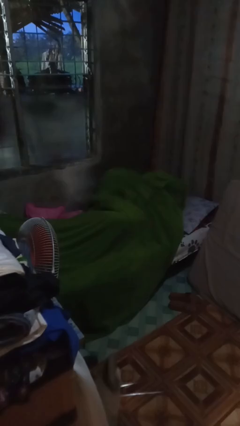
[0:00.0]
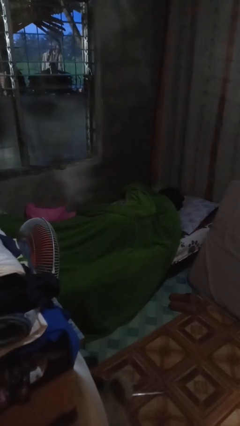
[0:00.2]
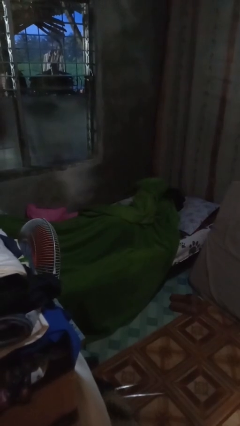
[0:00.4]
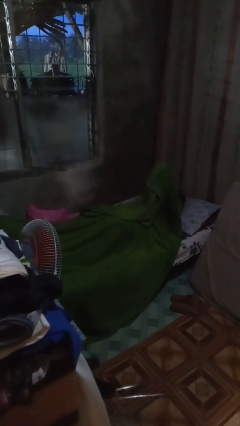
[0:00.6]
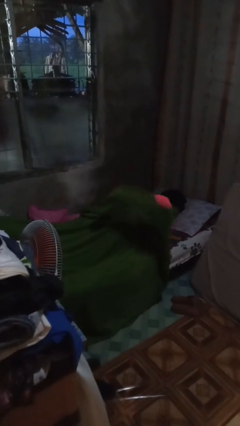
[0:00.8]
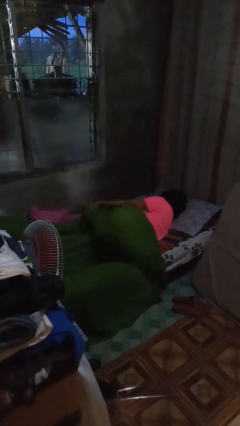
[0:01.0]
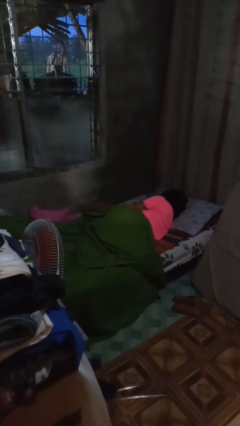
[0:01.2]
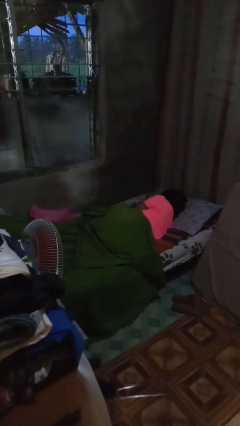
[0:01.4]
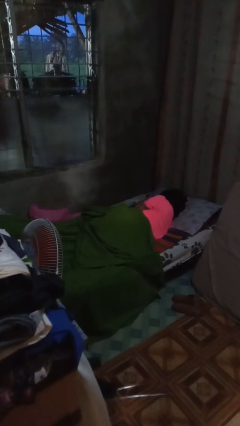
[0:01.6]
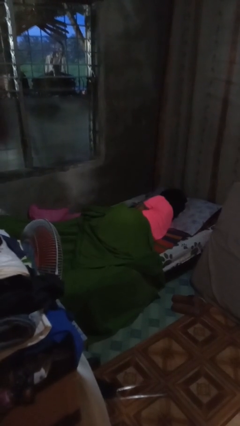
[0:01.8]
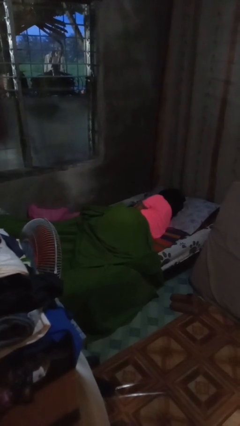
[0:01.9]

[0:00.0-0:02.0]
person uncovers with bedsheets

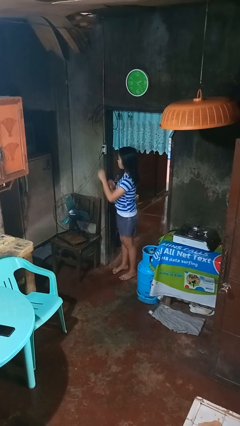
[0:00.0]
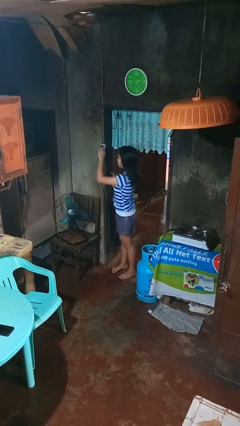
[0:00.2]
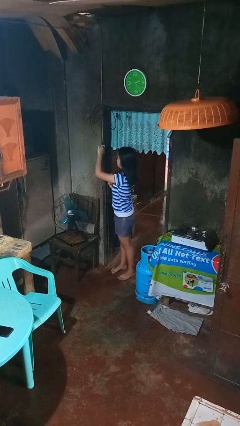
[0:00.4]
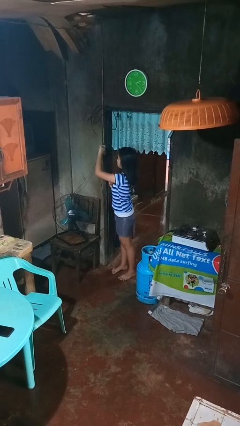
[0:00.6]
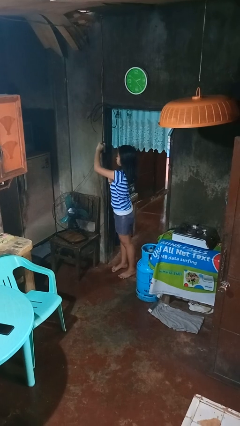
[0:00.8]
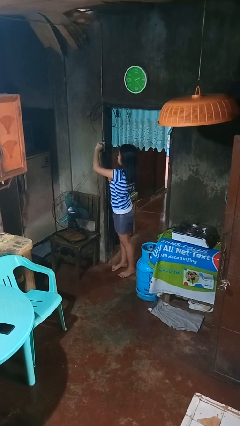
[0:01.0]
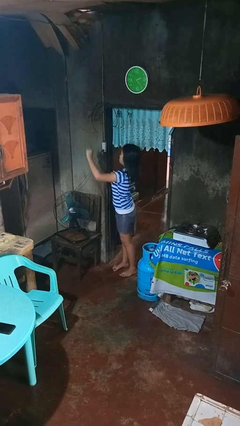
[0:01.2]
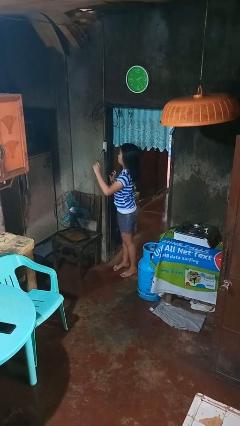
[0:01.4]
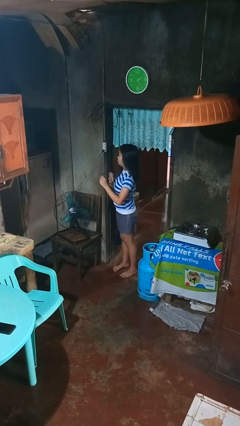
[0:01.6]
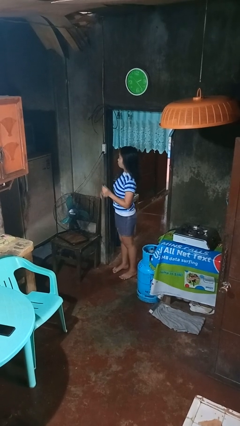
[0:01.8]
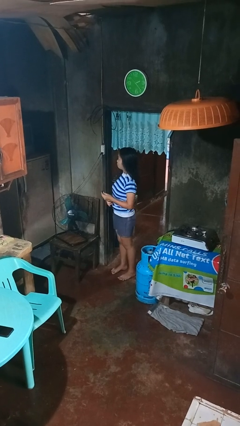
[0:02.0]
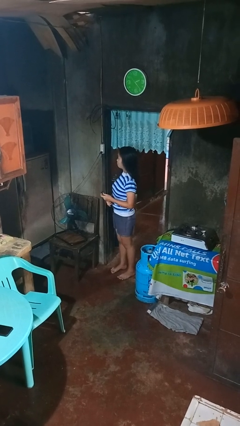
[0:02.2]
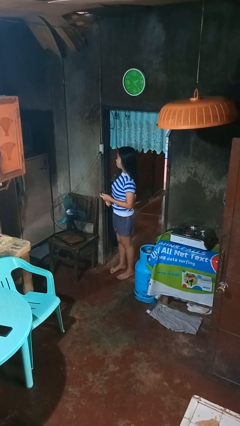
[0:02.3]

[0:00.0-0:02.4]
person unplugs from electrical socket

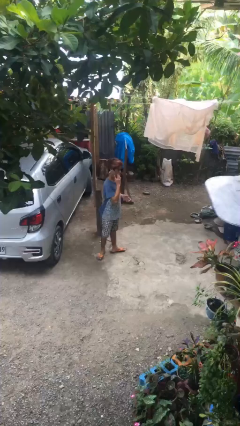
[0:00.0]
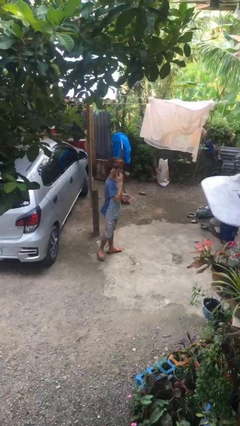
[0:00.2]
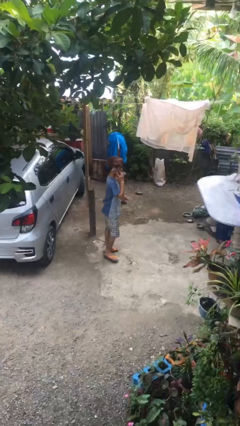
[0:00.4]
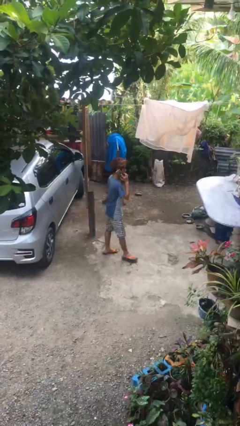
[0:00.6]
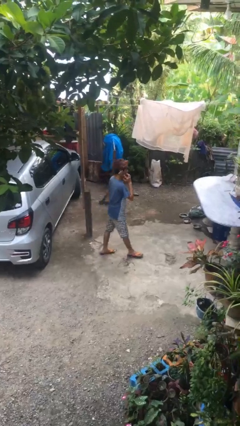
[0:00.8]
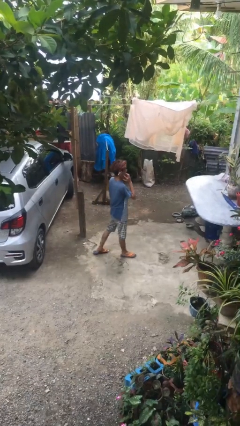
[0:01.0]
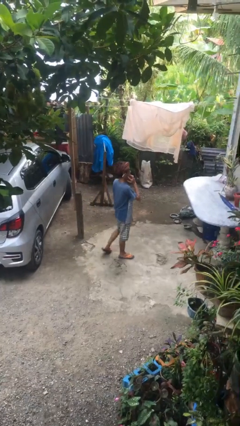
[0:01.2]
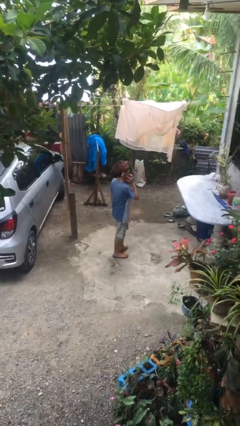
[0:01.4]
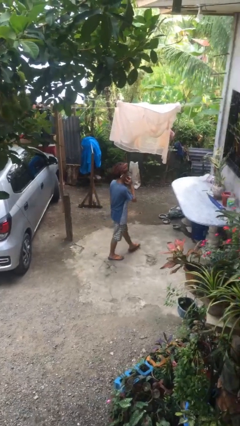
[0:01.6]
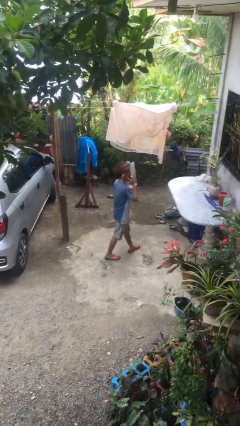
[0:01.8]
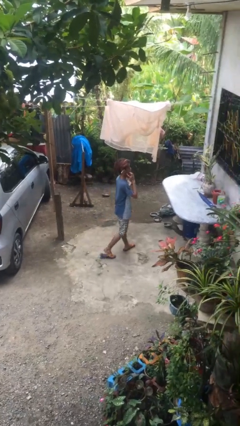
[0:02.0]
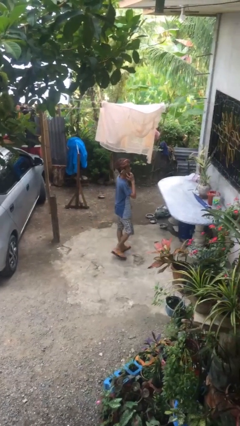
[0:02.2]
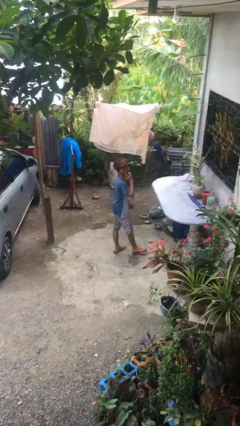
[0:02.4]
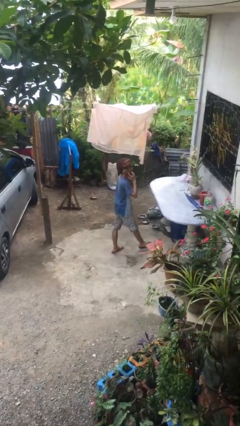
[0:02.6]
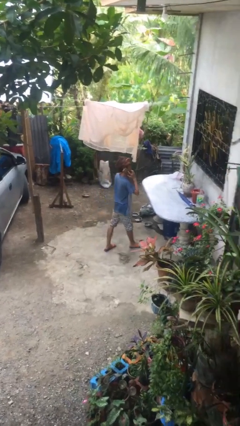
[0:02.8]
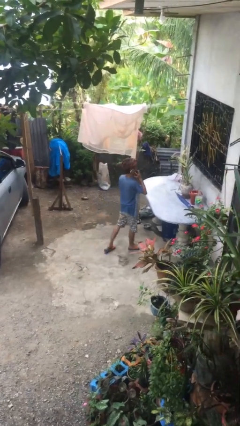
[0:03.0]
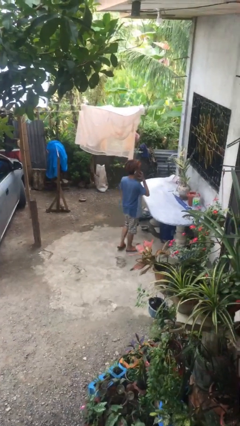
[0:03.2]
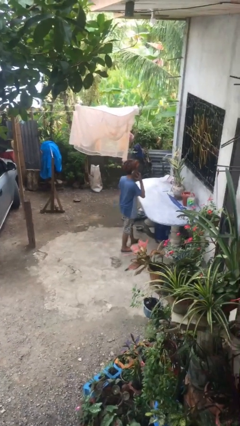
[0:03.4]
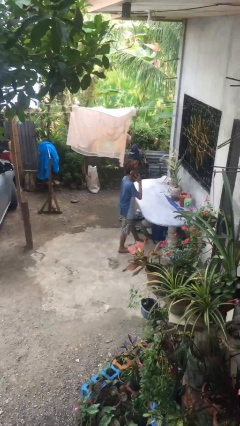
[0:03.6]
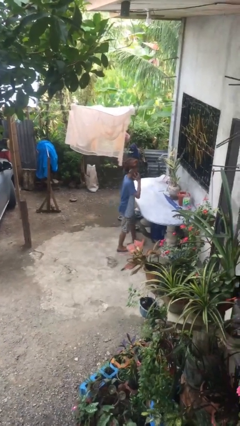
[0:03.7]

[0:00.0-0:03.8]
person talks on phone

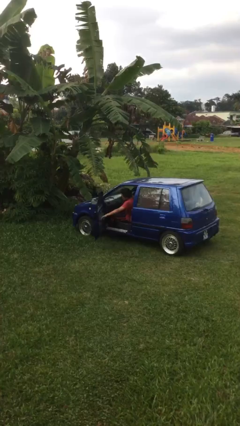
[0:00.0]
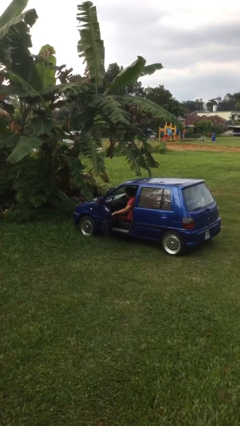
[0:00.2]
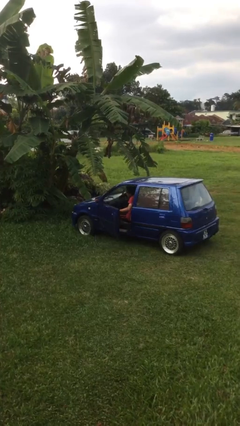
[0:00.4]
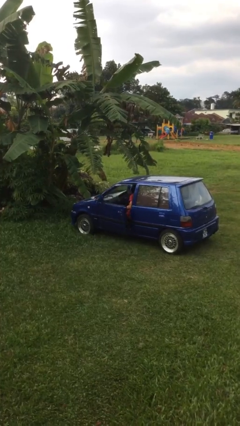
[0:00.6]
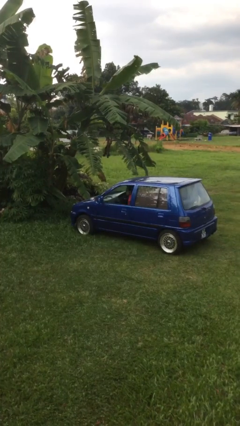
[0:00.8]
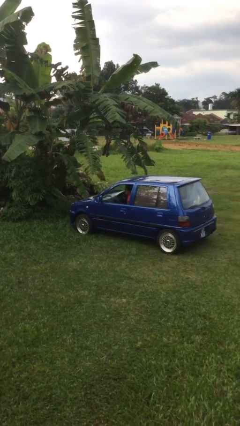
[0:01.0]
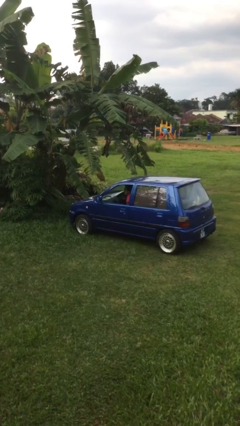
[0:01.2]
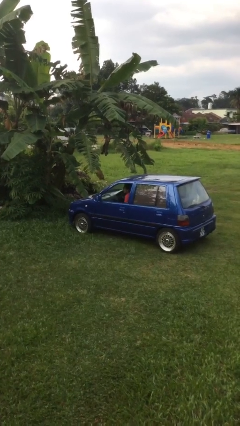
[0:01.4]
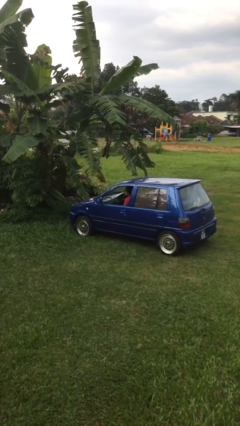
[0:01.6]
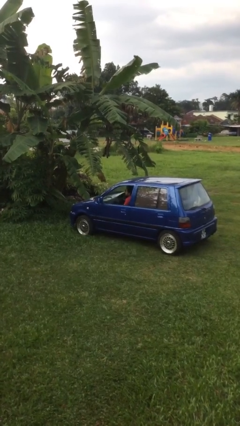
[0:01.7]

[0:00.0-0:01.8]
person closes car door

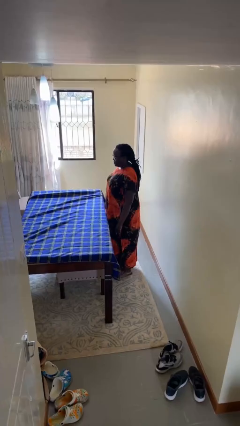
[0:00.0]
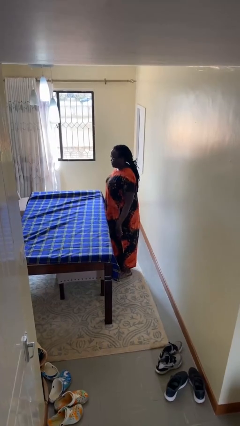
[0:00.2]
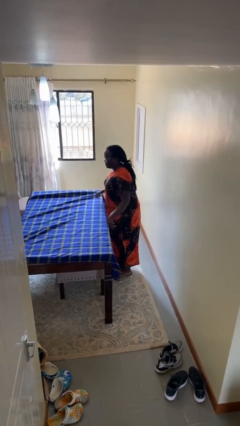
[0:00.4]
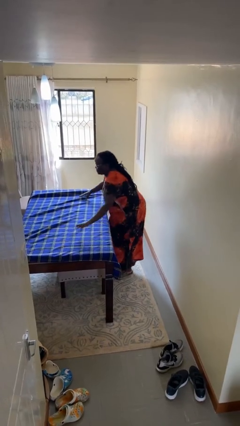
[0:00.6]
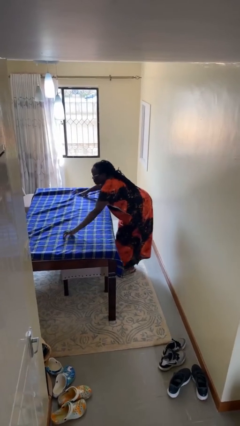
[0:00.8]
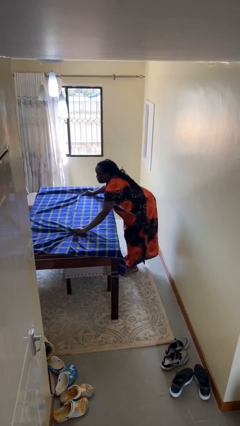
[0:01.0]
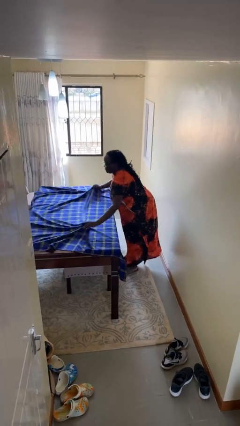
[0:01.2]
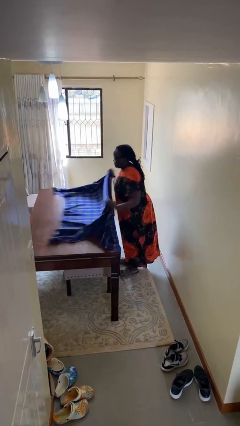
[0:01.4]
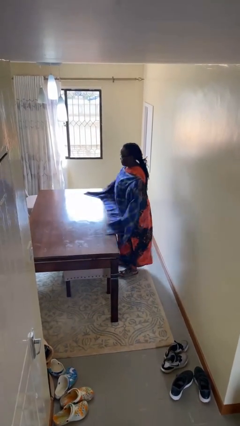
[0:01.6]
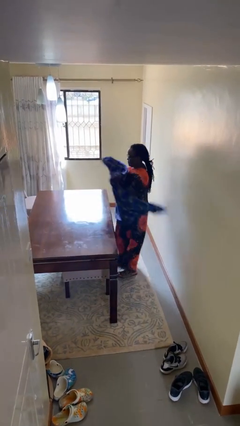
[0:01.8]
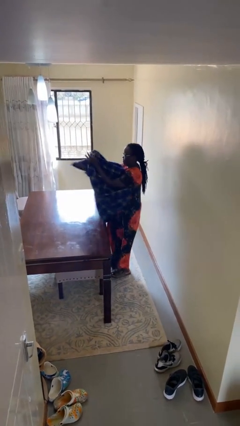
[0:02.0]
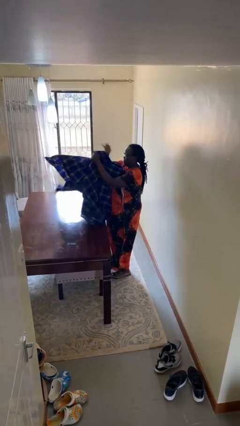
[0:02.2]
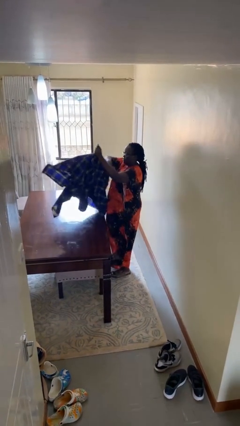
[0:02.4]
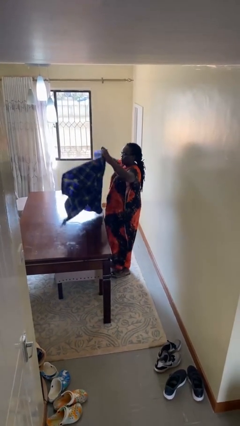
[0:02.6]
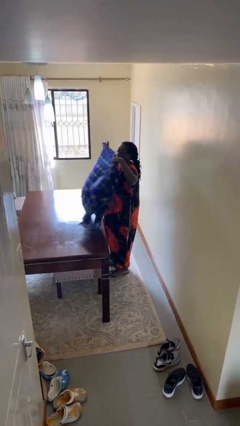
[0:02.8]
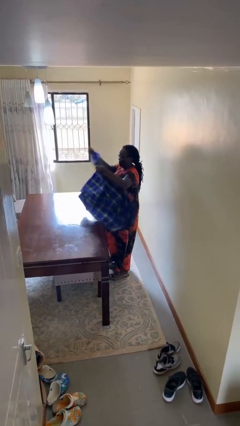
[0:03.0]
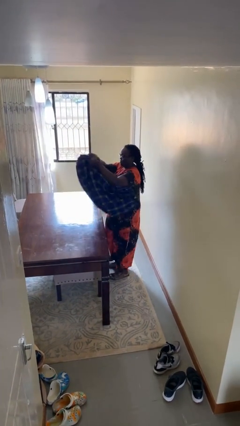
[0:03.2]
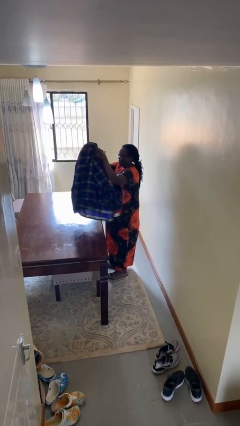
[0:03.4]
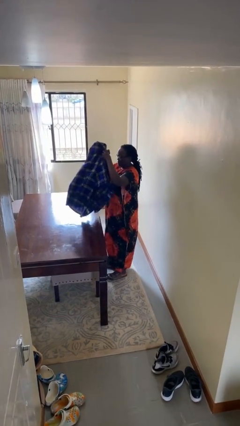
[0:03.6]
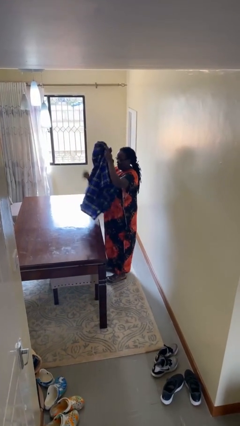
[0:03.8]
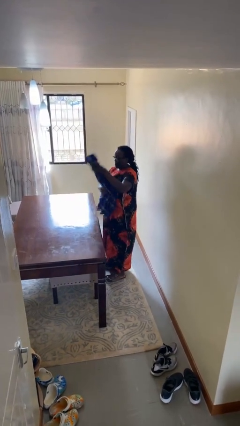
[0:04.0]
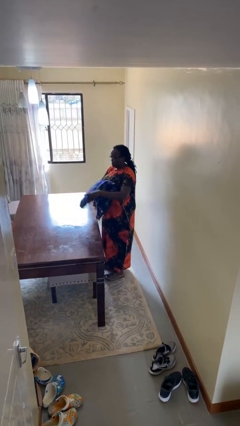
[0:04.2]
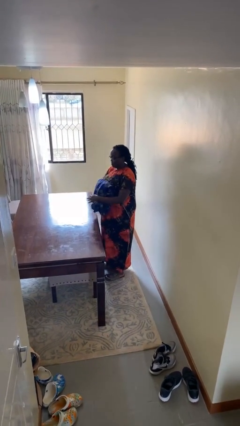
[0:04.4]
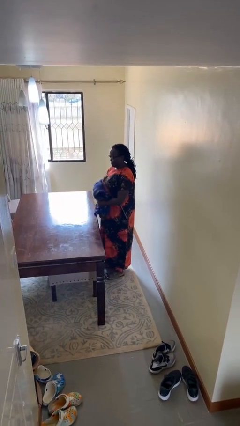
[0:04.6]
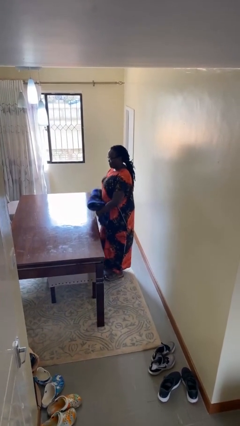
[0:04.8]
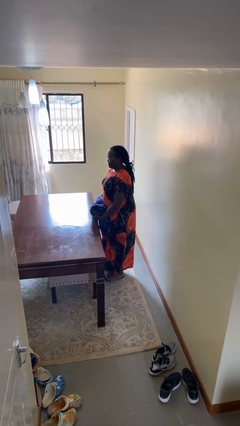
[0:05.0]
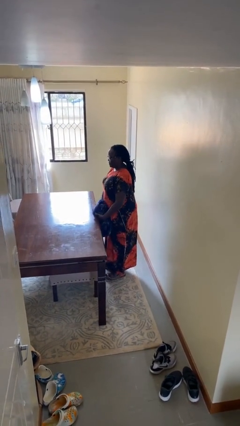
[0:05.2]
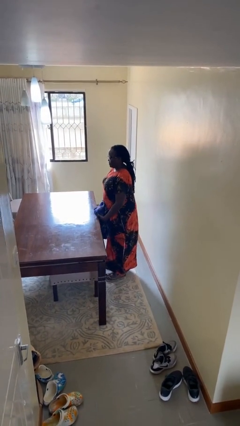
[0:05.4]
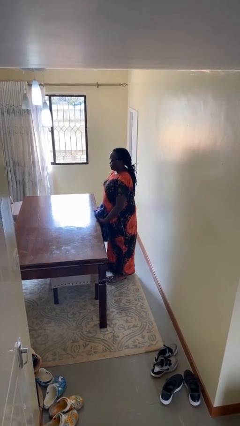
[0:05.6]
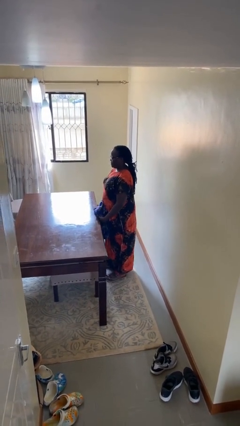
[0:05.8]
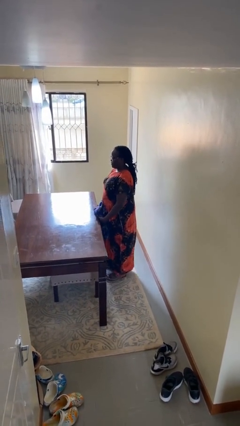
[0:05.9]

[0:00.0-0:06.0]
person folds tablecloth

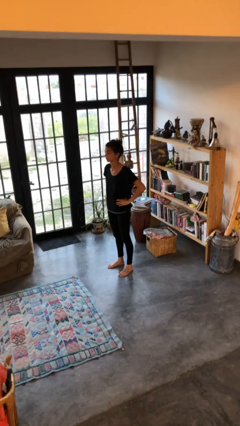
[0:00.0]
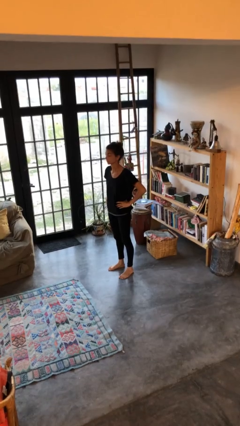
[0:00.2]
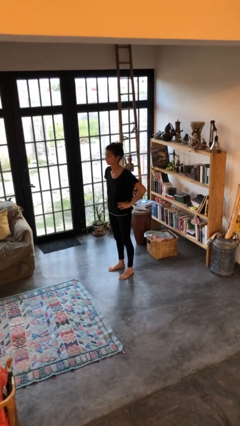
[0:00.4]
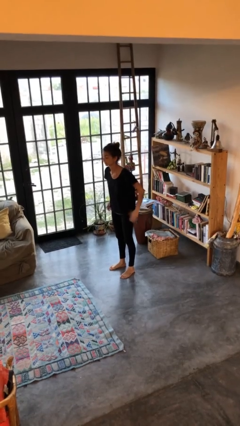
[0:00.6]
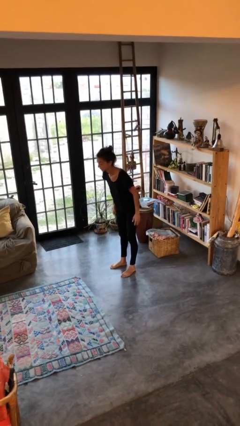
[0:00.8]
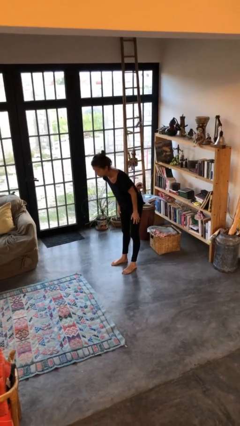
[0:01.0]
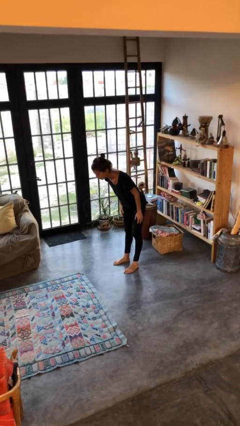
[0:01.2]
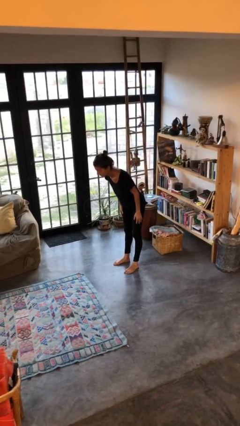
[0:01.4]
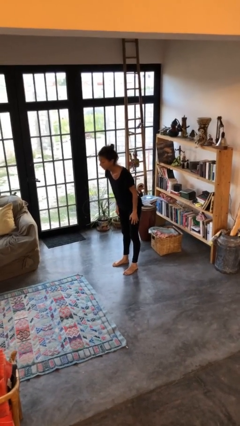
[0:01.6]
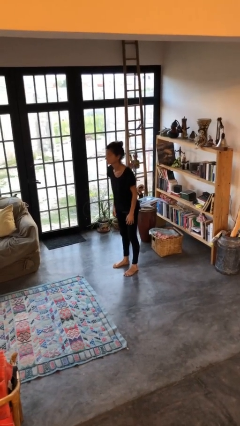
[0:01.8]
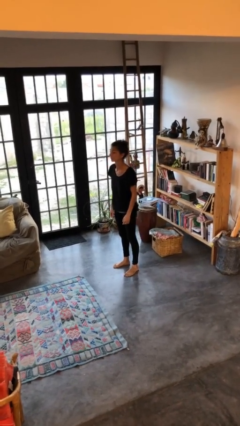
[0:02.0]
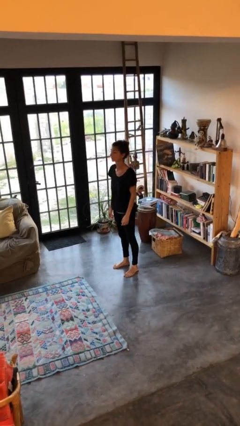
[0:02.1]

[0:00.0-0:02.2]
person bows
